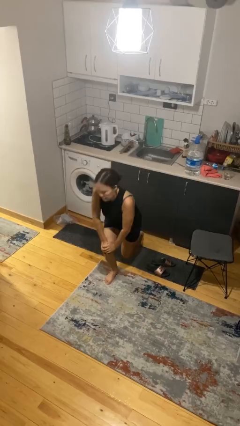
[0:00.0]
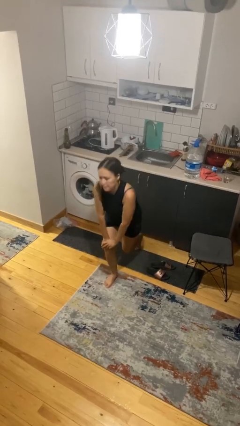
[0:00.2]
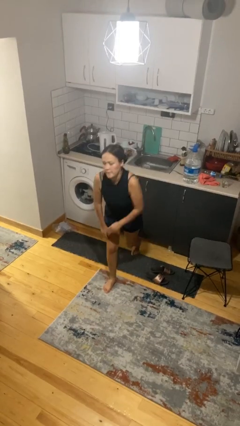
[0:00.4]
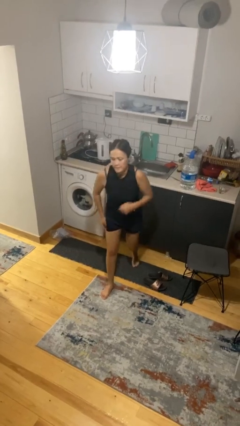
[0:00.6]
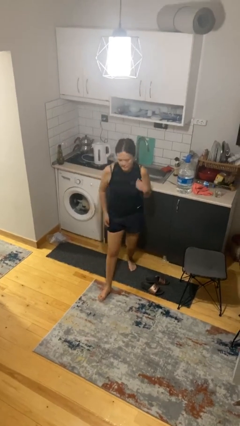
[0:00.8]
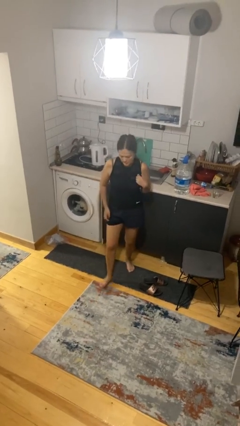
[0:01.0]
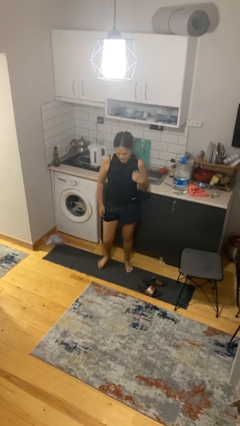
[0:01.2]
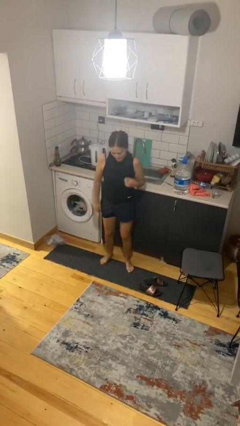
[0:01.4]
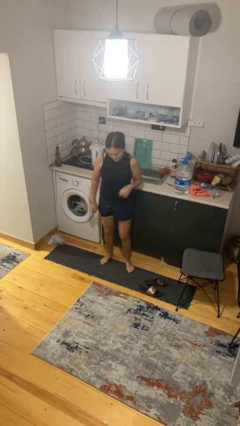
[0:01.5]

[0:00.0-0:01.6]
person stands up from floor

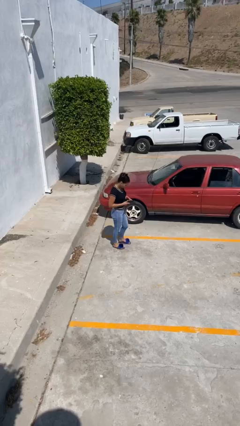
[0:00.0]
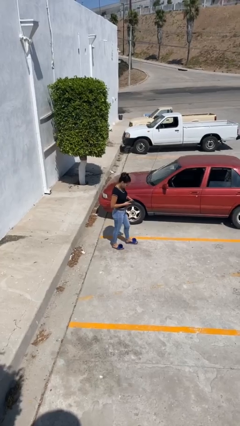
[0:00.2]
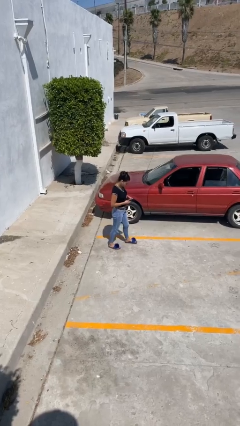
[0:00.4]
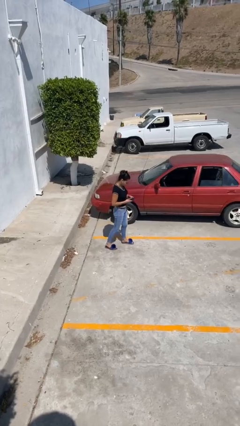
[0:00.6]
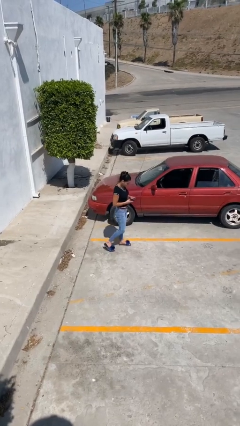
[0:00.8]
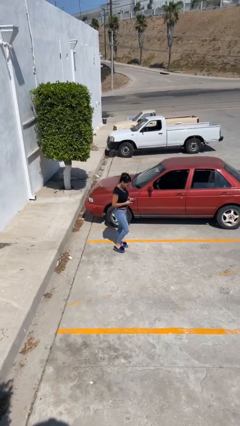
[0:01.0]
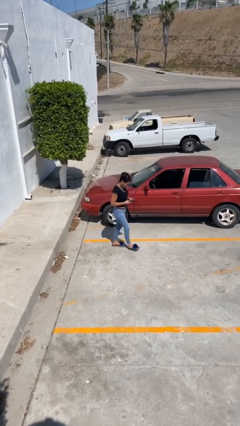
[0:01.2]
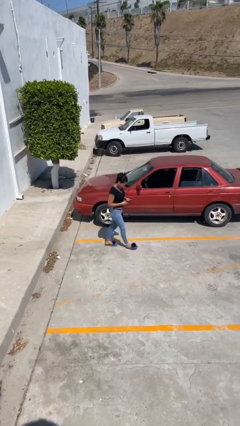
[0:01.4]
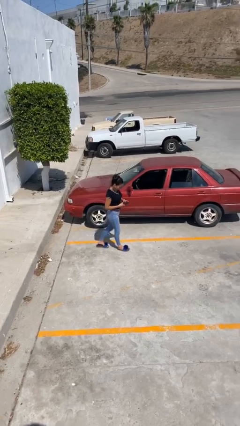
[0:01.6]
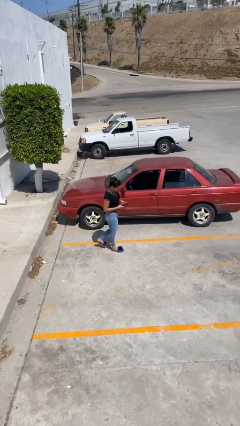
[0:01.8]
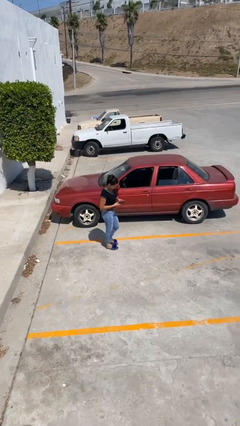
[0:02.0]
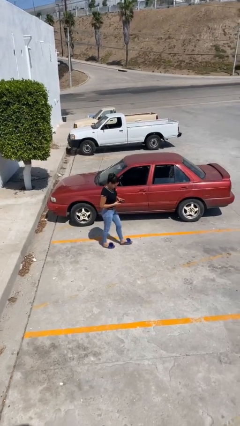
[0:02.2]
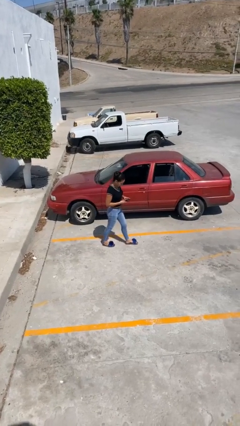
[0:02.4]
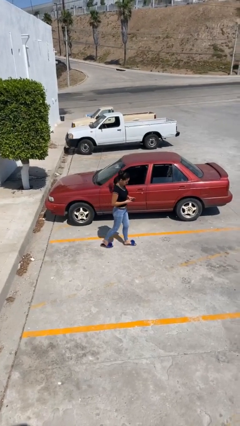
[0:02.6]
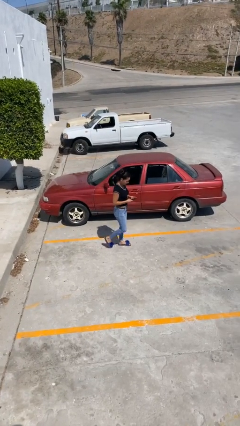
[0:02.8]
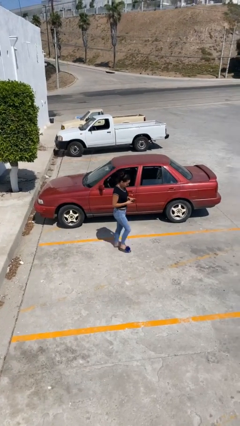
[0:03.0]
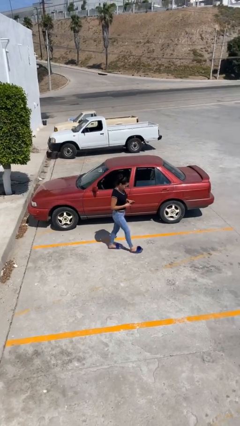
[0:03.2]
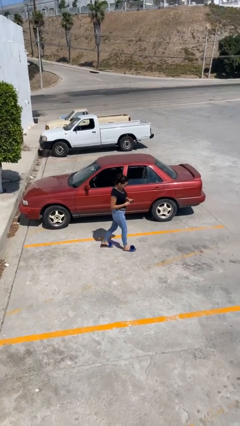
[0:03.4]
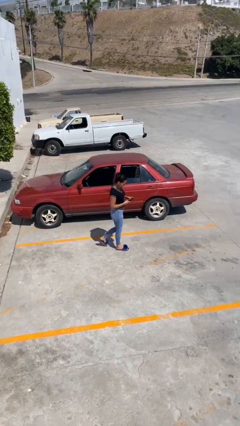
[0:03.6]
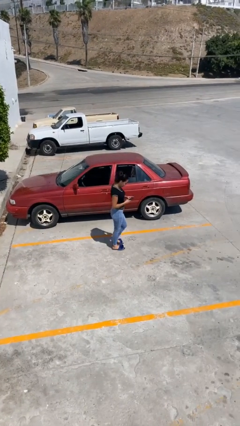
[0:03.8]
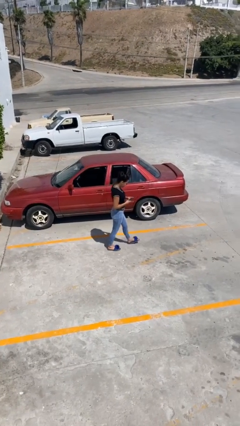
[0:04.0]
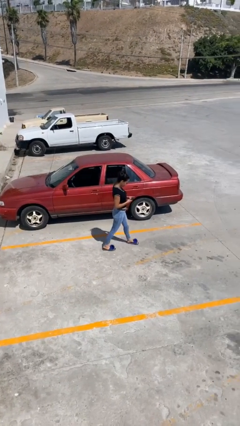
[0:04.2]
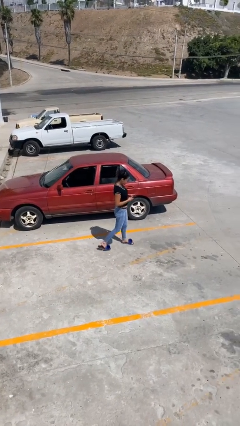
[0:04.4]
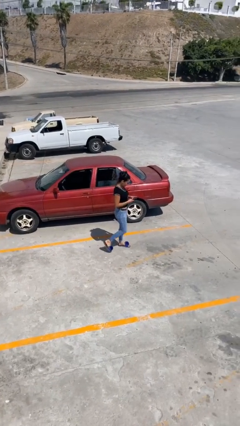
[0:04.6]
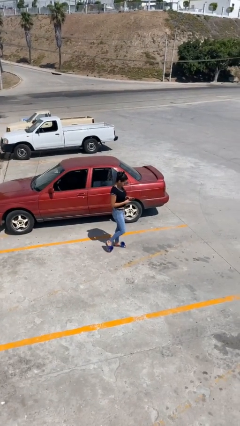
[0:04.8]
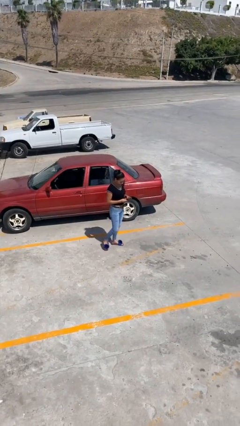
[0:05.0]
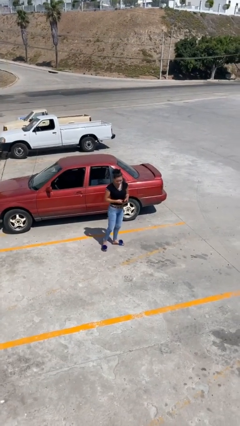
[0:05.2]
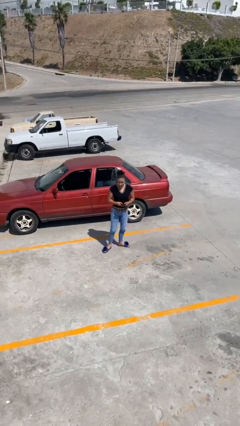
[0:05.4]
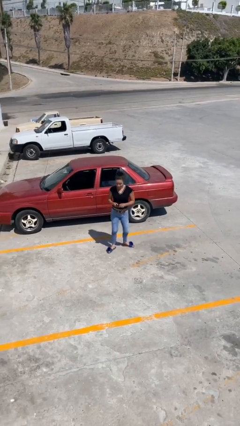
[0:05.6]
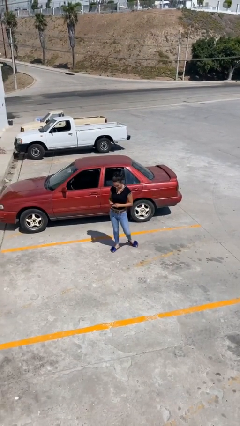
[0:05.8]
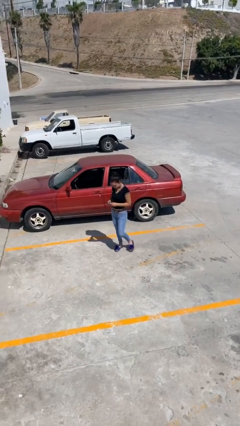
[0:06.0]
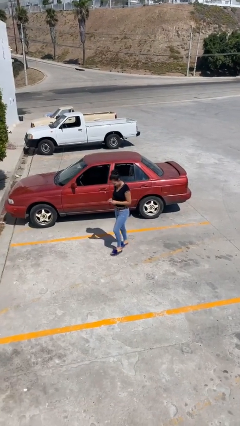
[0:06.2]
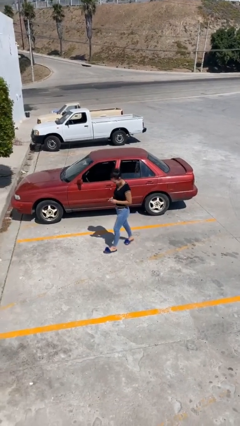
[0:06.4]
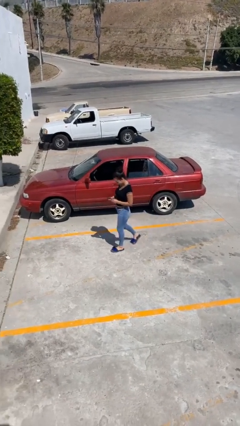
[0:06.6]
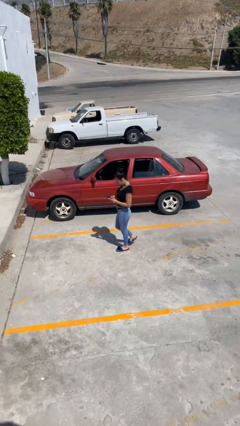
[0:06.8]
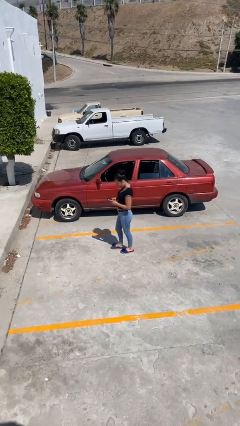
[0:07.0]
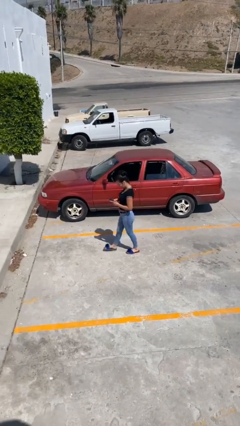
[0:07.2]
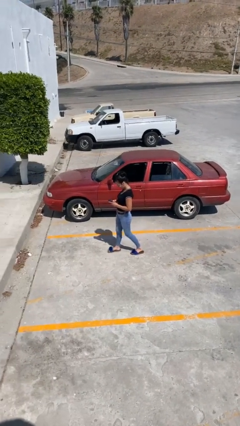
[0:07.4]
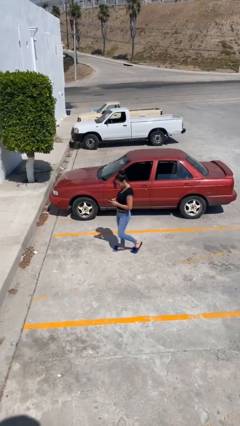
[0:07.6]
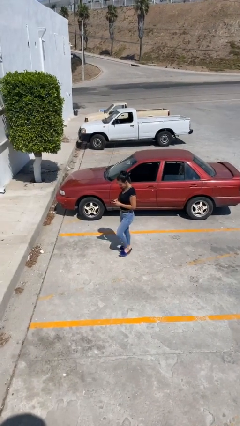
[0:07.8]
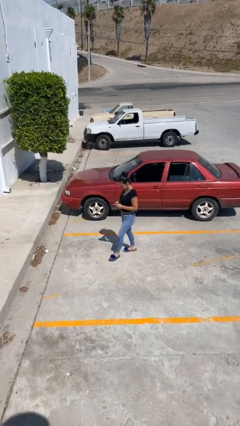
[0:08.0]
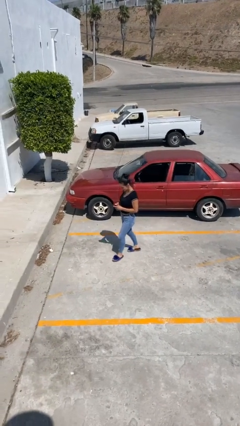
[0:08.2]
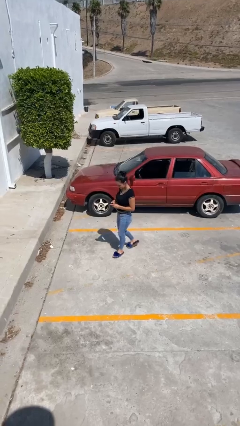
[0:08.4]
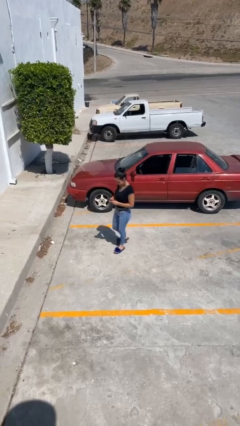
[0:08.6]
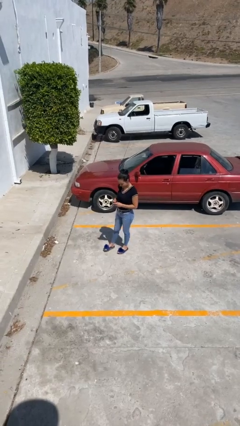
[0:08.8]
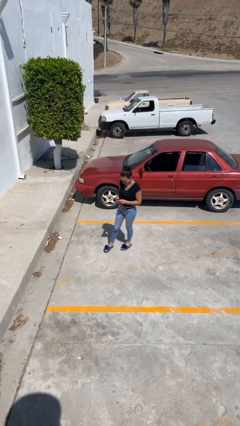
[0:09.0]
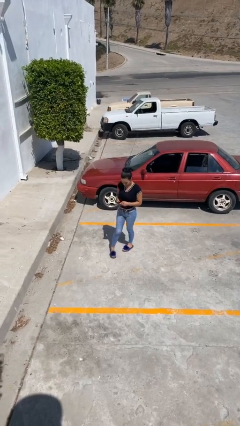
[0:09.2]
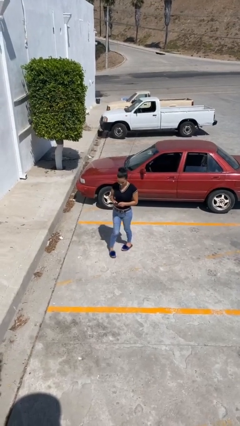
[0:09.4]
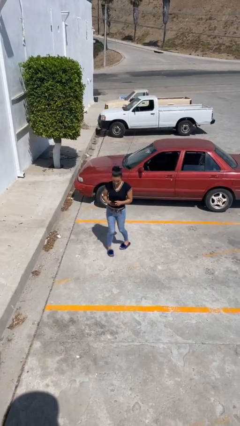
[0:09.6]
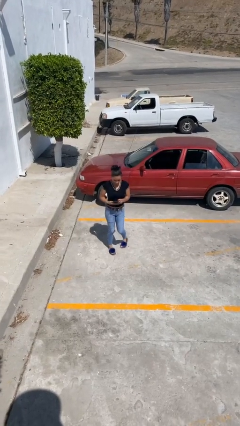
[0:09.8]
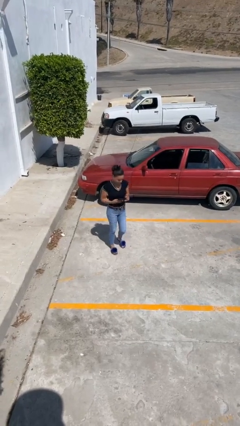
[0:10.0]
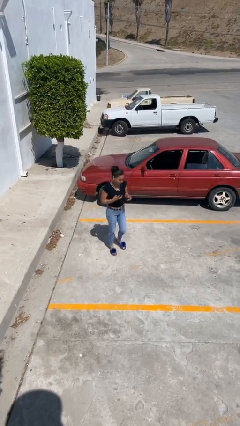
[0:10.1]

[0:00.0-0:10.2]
person texts on phone

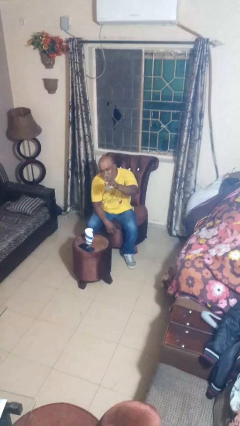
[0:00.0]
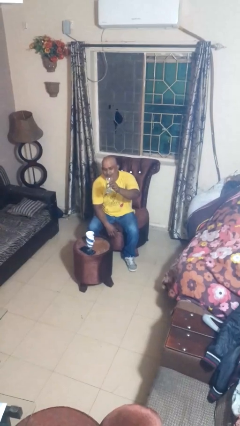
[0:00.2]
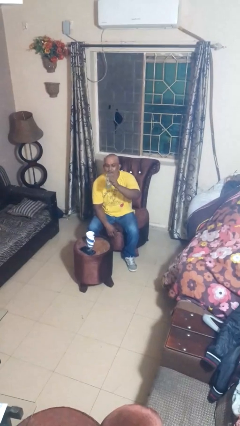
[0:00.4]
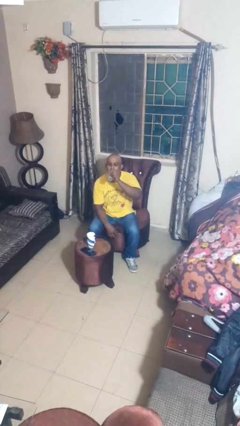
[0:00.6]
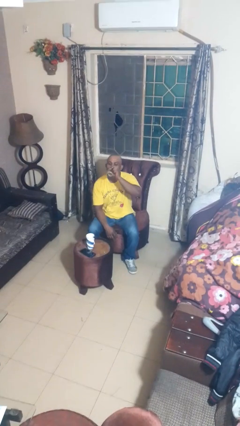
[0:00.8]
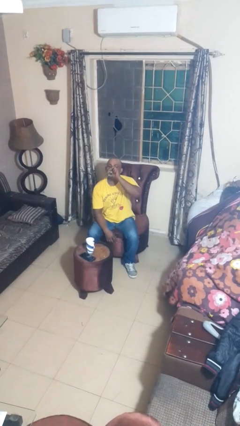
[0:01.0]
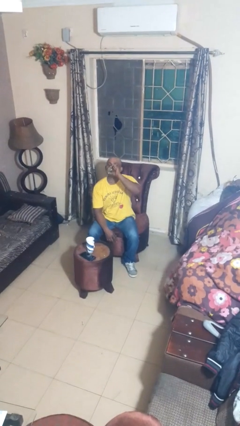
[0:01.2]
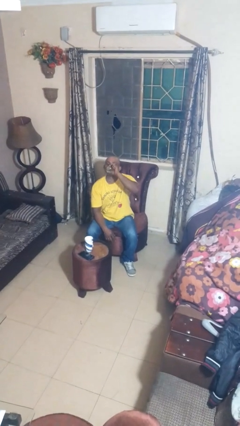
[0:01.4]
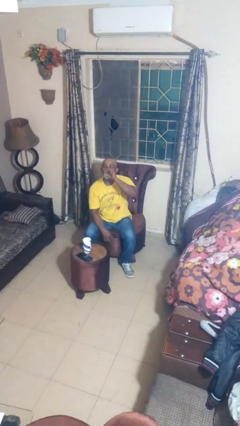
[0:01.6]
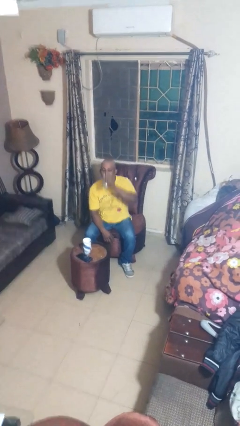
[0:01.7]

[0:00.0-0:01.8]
person drinks from shotglass

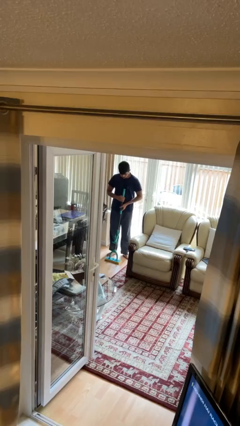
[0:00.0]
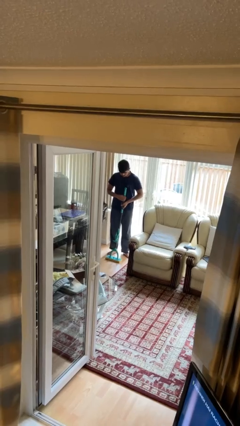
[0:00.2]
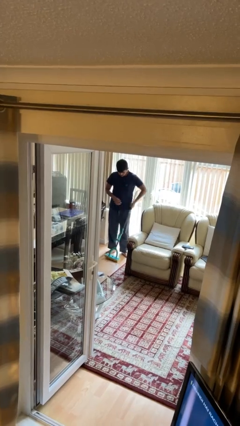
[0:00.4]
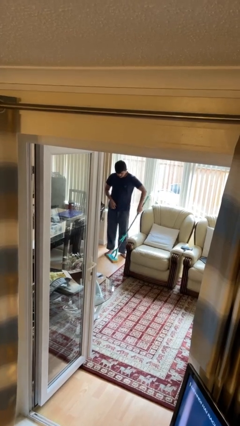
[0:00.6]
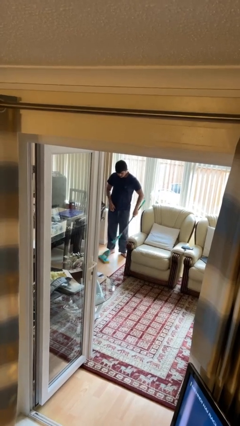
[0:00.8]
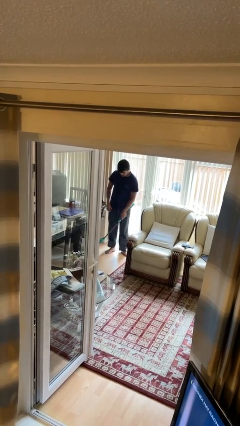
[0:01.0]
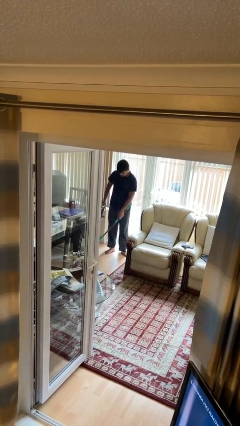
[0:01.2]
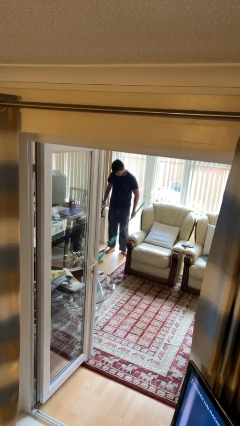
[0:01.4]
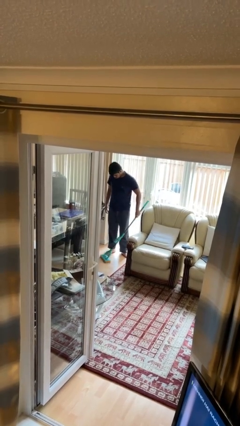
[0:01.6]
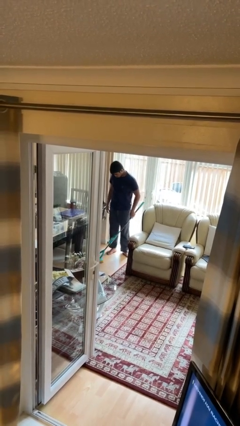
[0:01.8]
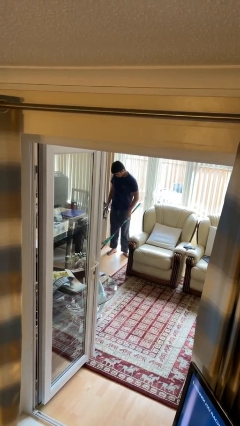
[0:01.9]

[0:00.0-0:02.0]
person mops

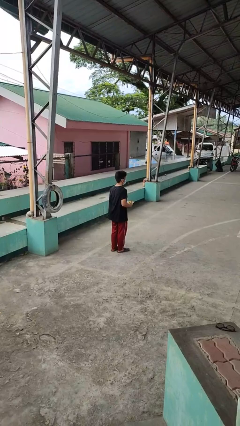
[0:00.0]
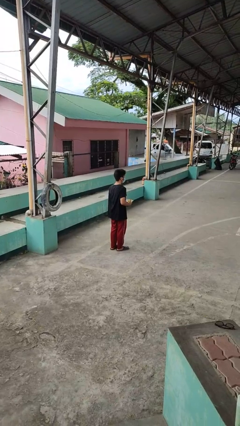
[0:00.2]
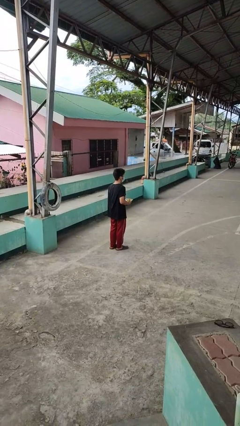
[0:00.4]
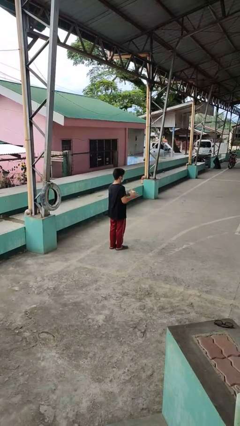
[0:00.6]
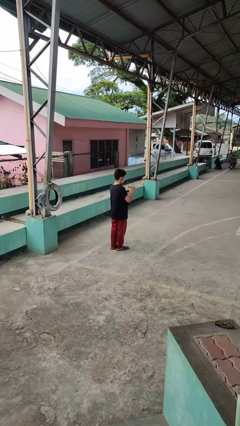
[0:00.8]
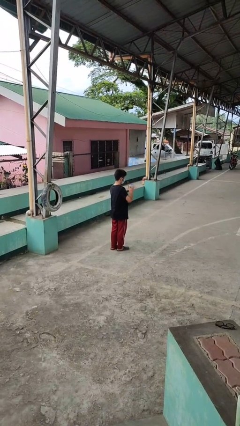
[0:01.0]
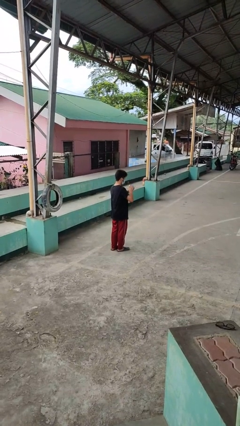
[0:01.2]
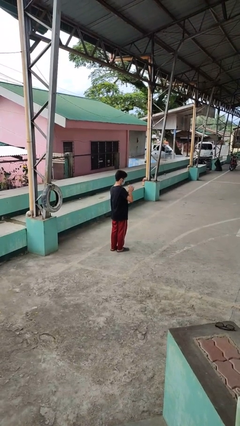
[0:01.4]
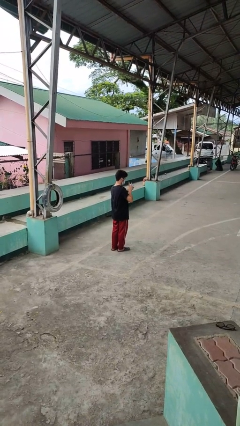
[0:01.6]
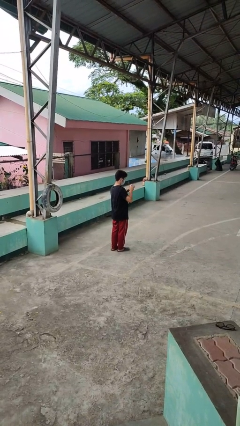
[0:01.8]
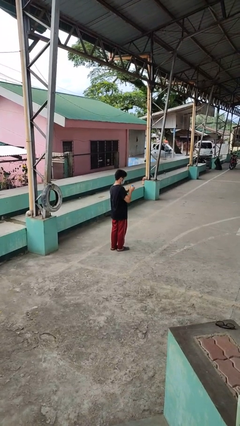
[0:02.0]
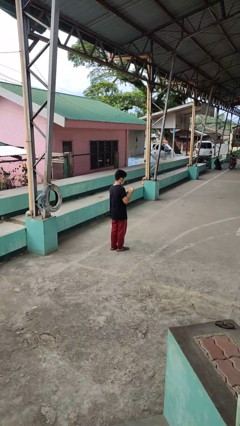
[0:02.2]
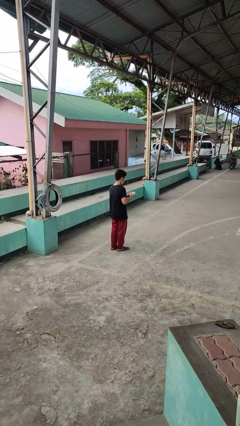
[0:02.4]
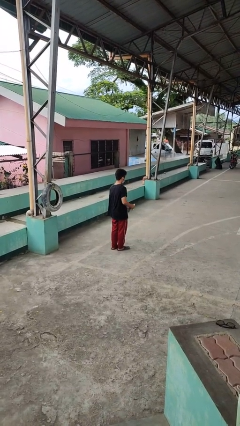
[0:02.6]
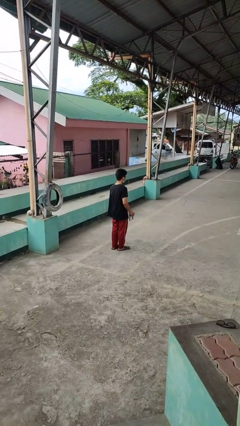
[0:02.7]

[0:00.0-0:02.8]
person squeezes object
